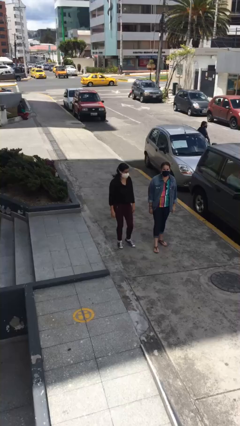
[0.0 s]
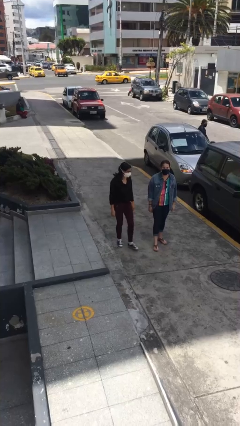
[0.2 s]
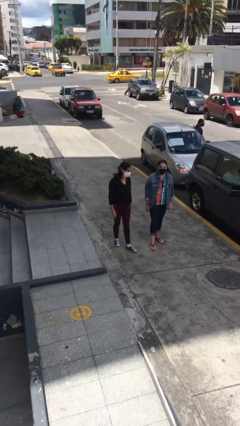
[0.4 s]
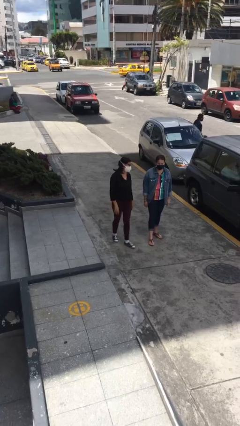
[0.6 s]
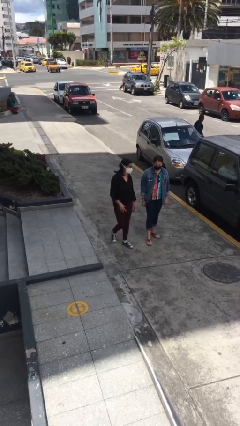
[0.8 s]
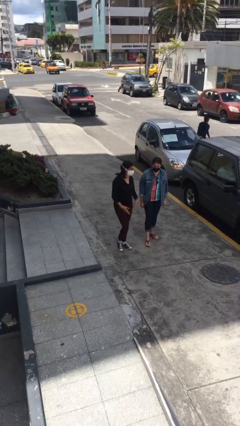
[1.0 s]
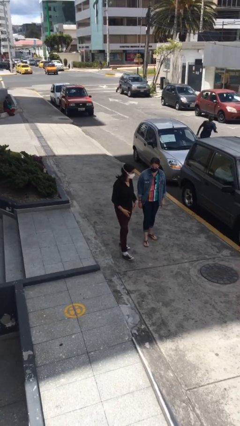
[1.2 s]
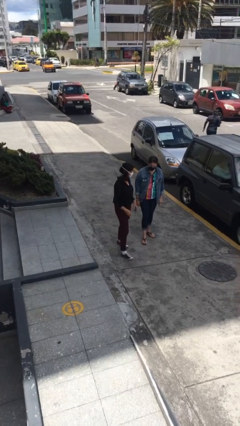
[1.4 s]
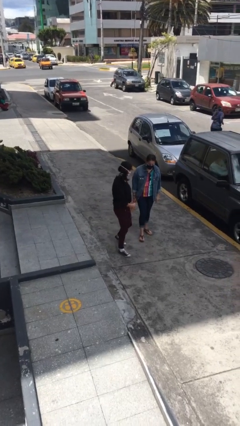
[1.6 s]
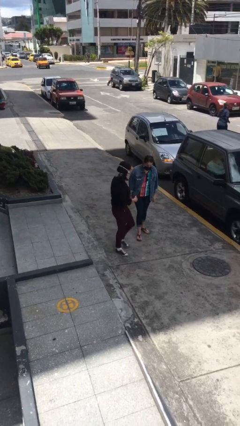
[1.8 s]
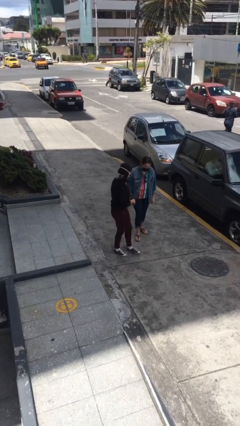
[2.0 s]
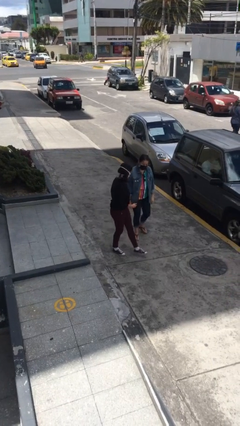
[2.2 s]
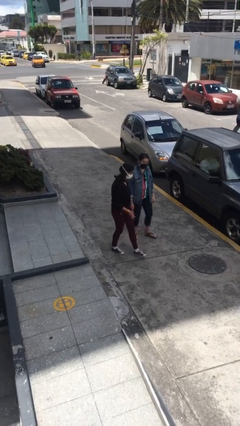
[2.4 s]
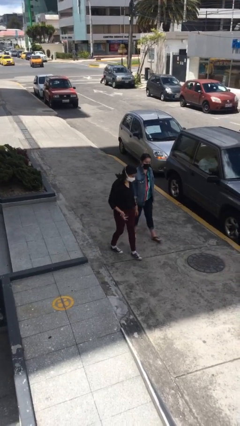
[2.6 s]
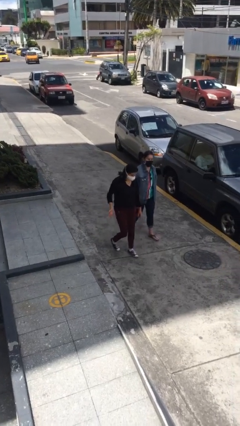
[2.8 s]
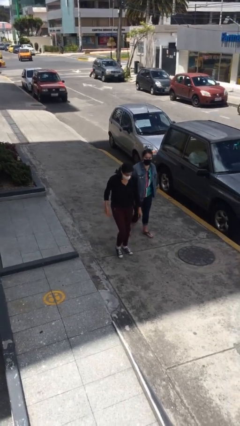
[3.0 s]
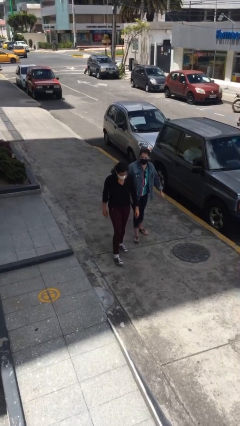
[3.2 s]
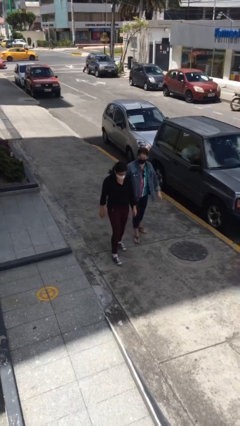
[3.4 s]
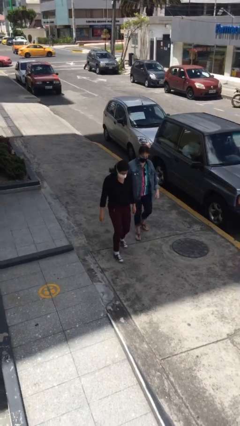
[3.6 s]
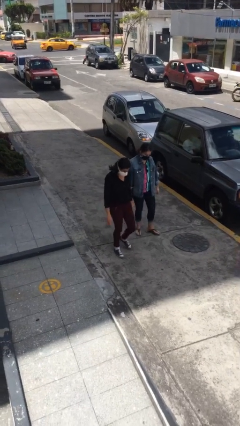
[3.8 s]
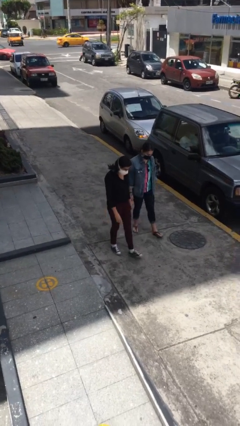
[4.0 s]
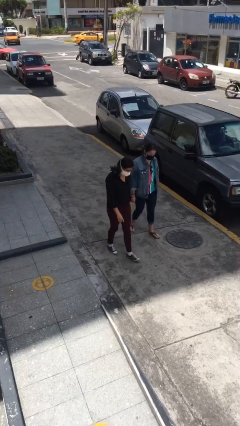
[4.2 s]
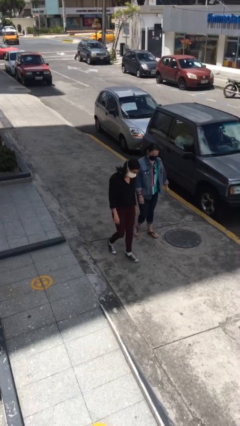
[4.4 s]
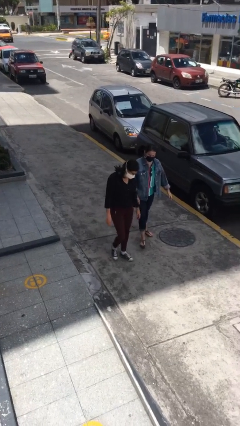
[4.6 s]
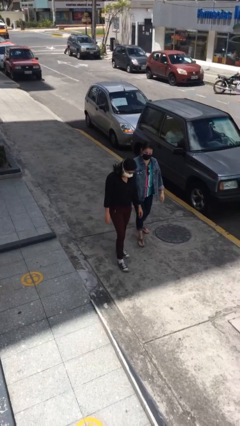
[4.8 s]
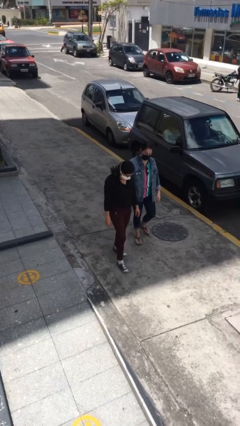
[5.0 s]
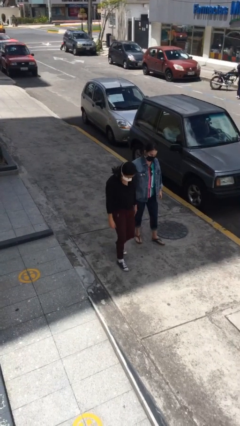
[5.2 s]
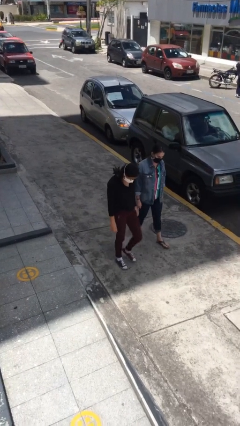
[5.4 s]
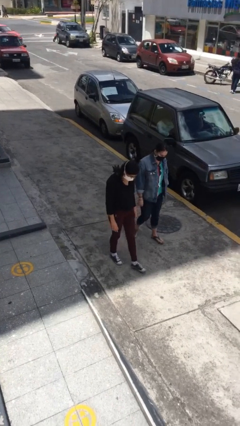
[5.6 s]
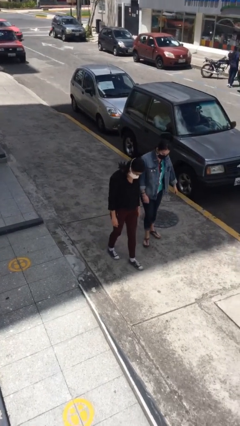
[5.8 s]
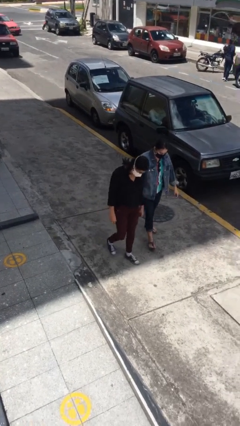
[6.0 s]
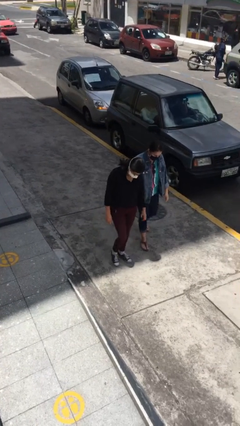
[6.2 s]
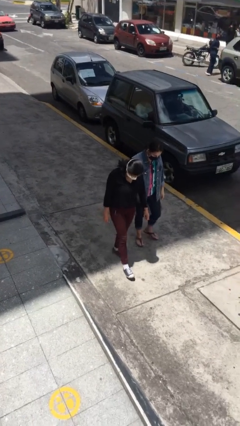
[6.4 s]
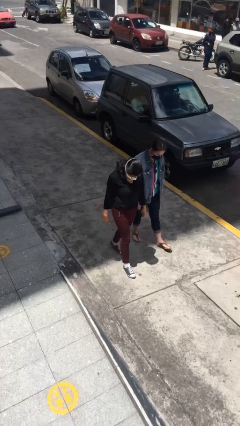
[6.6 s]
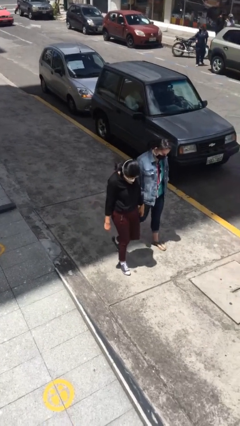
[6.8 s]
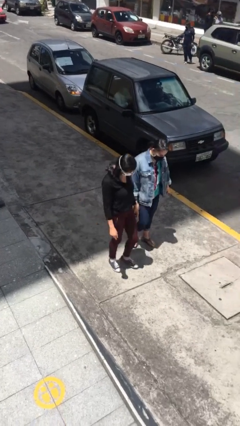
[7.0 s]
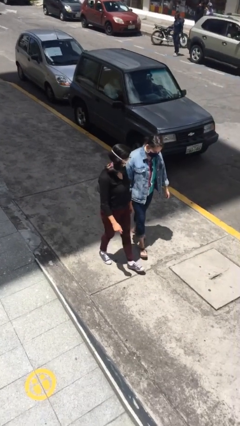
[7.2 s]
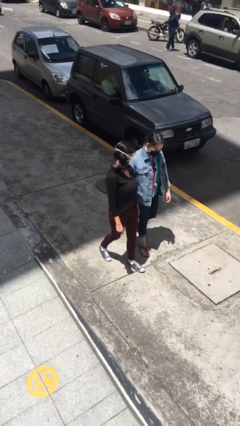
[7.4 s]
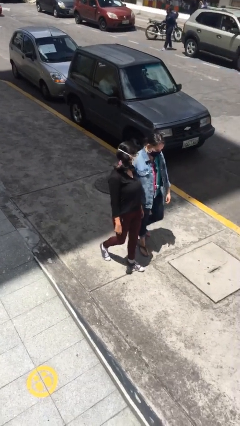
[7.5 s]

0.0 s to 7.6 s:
person talks to person

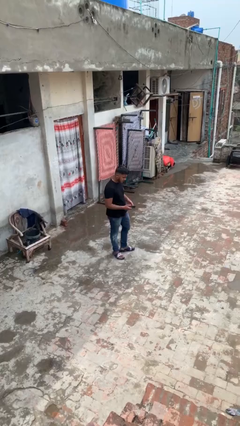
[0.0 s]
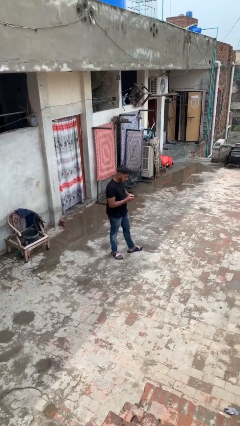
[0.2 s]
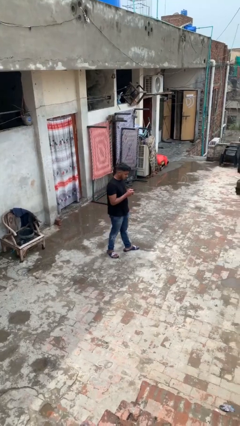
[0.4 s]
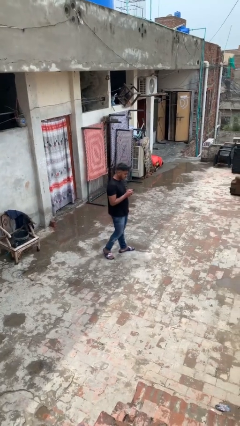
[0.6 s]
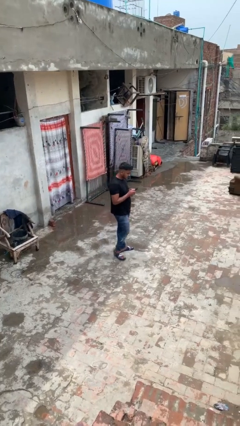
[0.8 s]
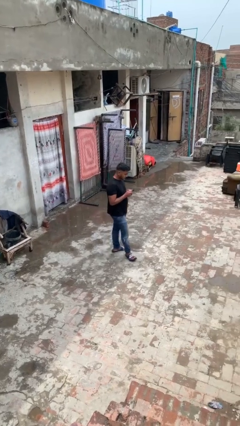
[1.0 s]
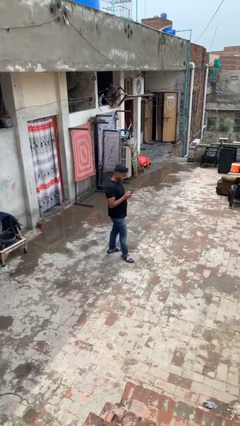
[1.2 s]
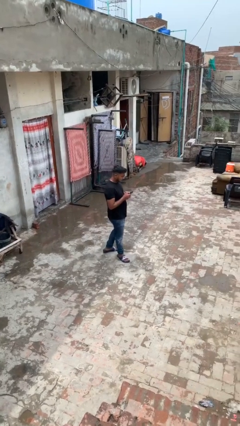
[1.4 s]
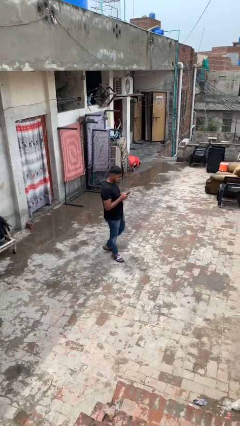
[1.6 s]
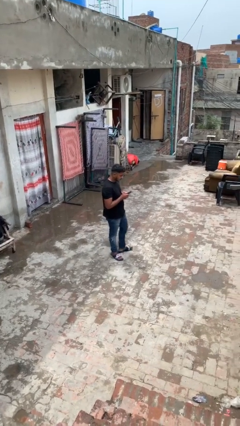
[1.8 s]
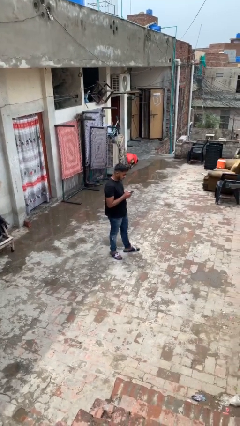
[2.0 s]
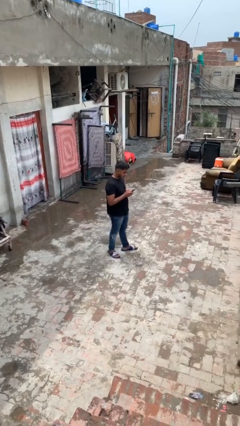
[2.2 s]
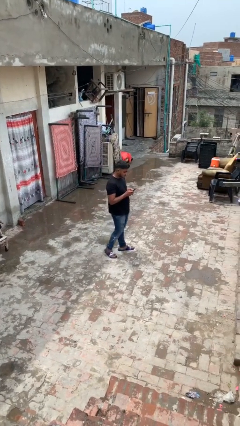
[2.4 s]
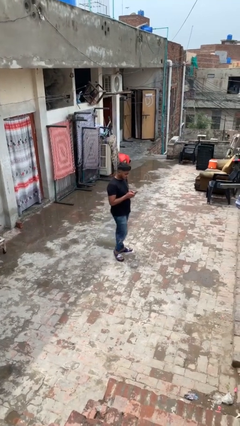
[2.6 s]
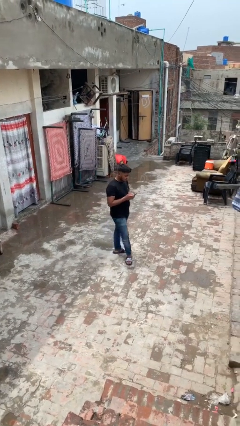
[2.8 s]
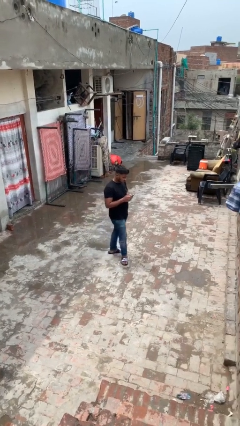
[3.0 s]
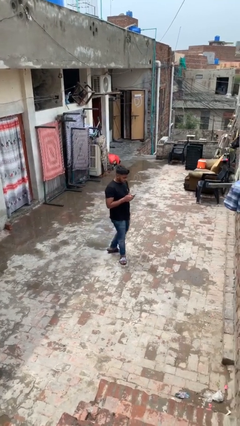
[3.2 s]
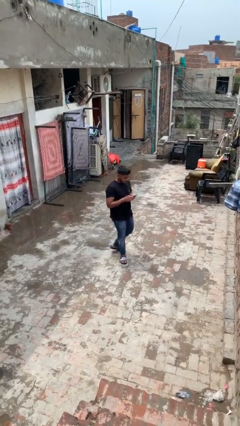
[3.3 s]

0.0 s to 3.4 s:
person texts on phone

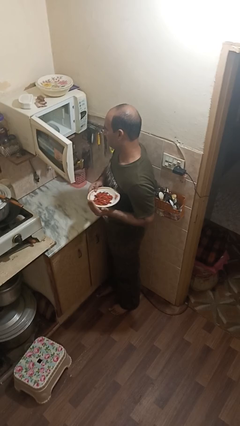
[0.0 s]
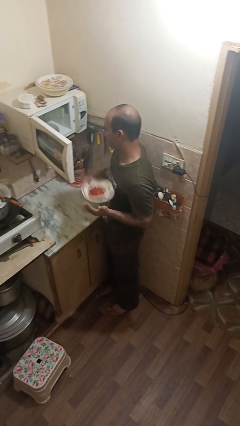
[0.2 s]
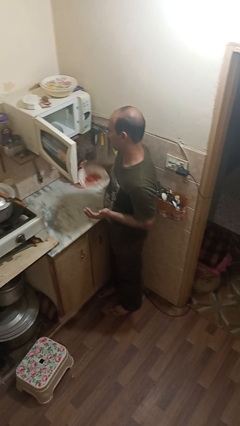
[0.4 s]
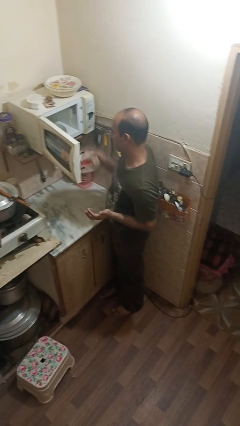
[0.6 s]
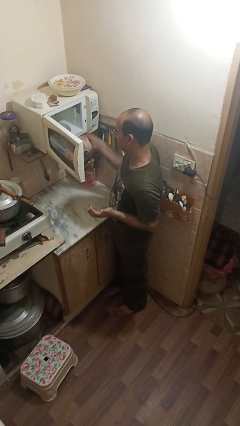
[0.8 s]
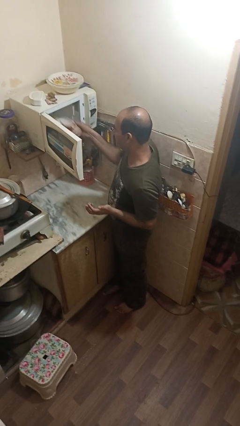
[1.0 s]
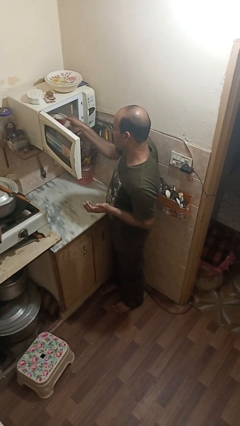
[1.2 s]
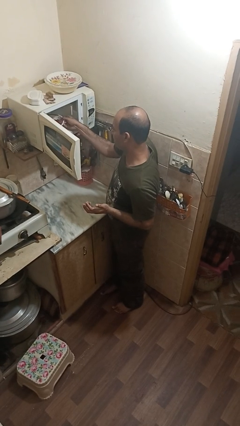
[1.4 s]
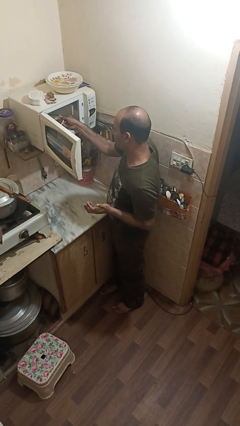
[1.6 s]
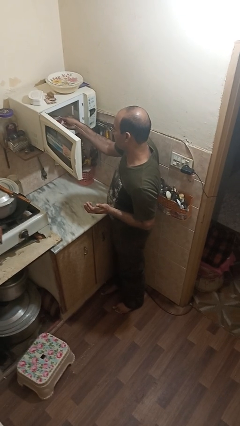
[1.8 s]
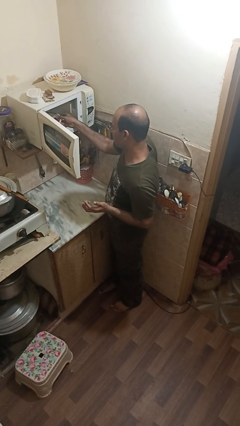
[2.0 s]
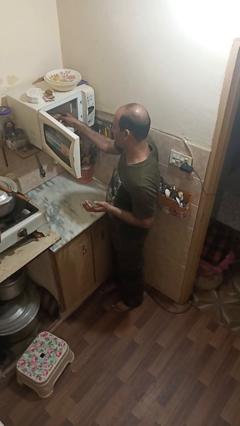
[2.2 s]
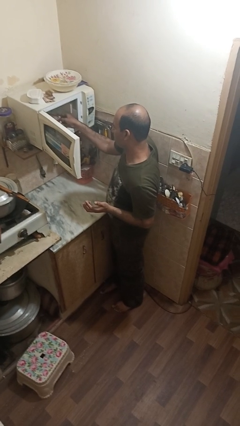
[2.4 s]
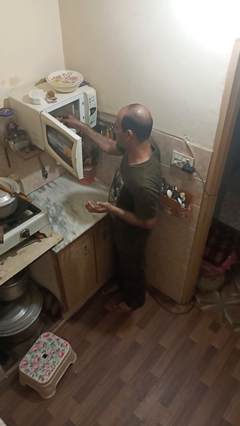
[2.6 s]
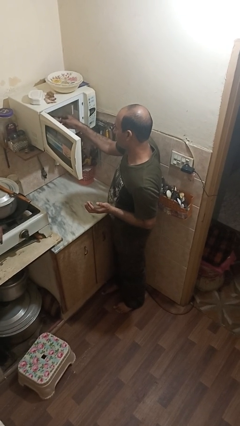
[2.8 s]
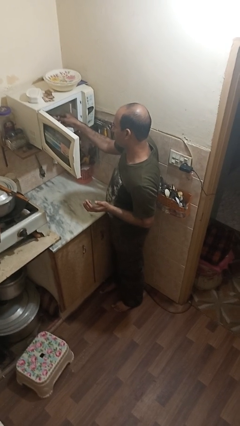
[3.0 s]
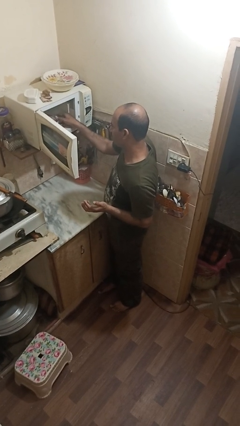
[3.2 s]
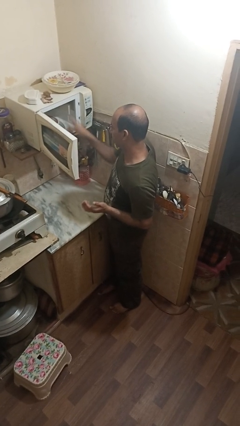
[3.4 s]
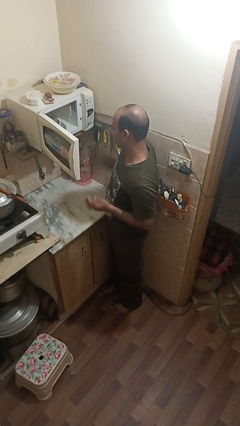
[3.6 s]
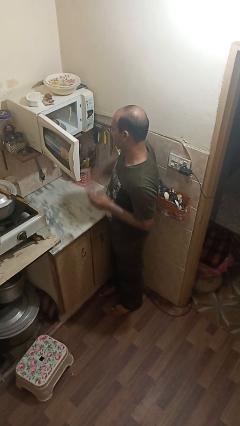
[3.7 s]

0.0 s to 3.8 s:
person puts object into microwave

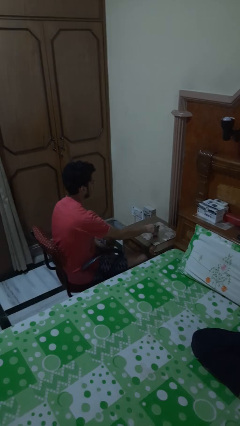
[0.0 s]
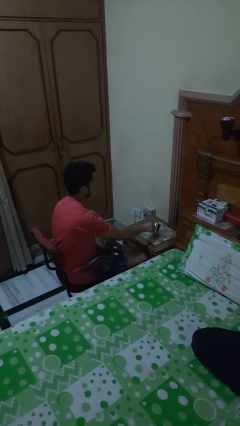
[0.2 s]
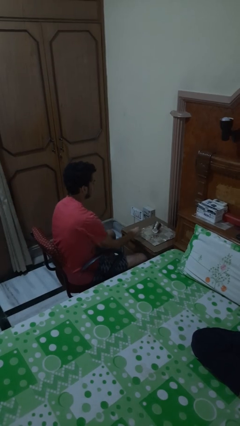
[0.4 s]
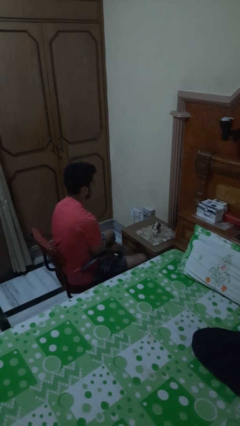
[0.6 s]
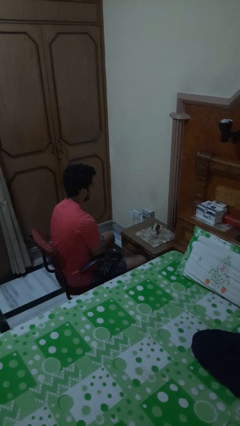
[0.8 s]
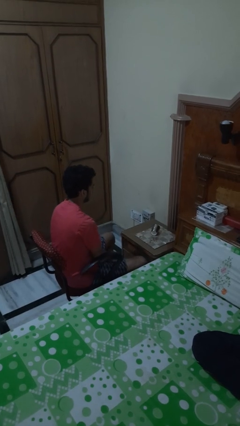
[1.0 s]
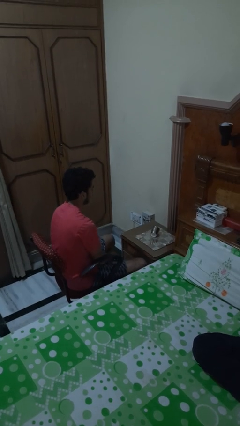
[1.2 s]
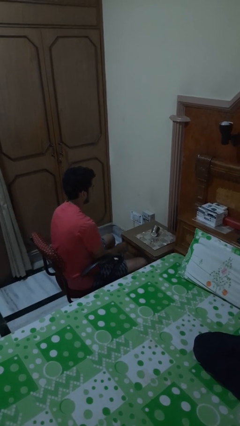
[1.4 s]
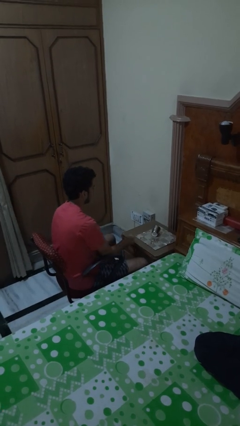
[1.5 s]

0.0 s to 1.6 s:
person knocks over glass

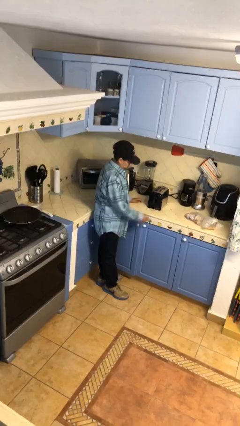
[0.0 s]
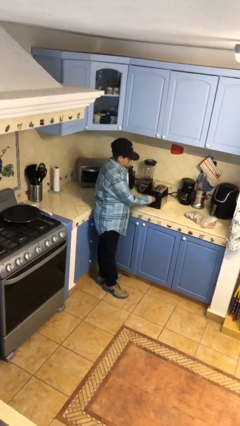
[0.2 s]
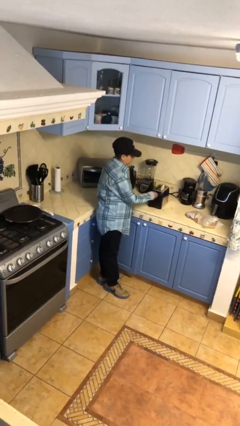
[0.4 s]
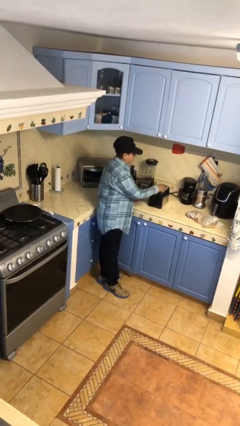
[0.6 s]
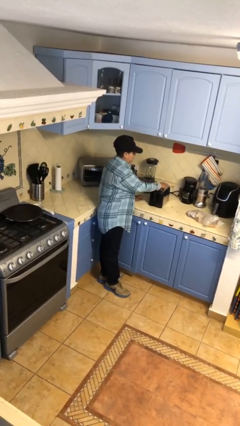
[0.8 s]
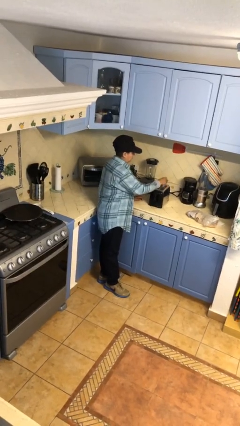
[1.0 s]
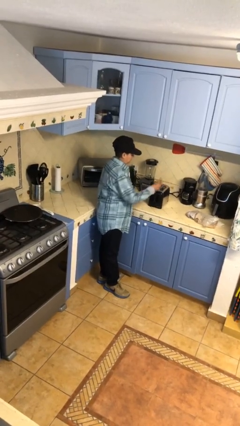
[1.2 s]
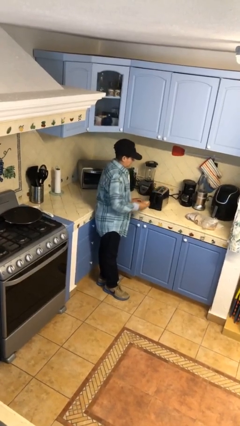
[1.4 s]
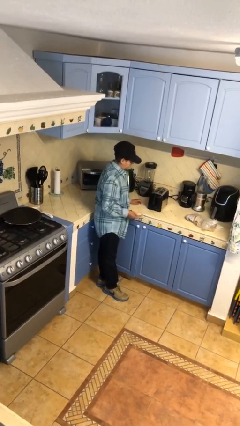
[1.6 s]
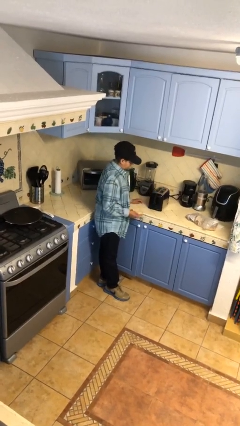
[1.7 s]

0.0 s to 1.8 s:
person takes object from toaster
